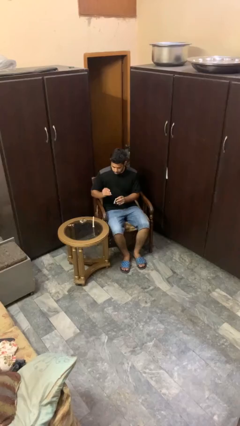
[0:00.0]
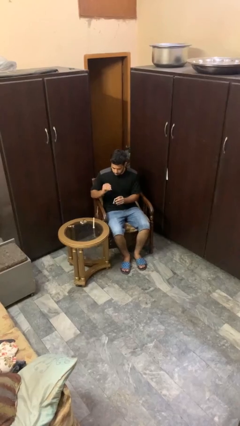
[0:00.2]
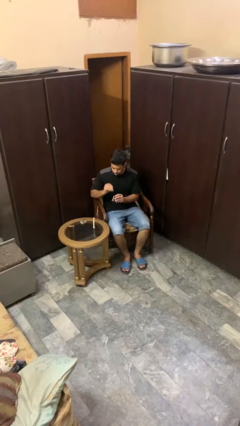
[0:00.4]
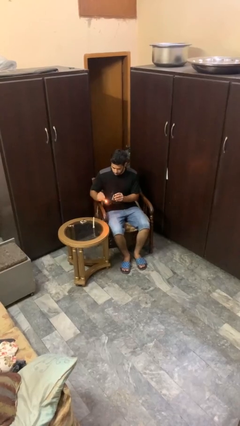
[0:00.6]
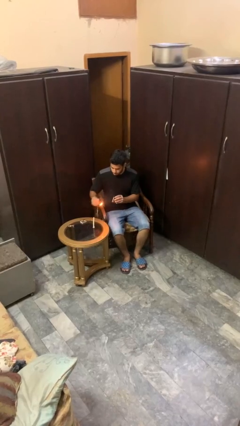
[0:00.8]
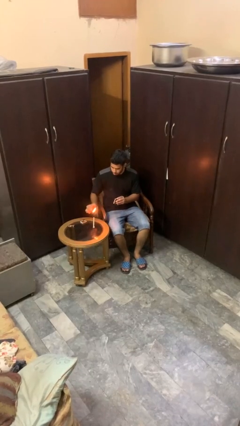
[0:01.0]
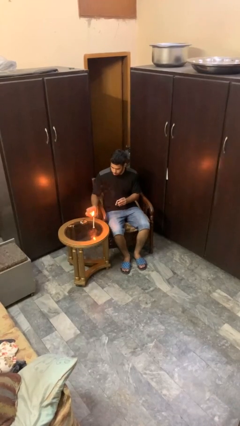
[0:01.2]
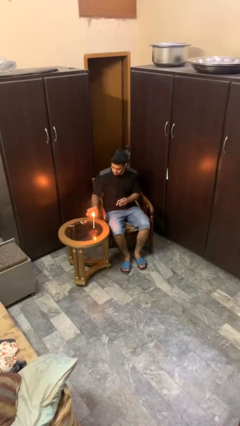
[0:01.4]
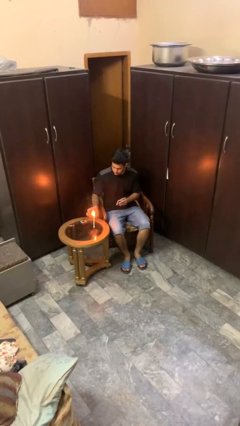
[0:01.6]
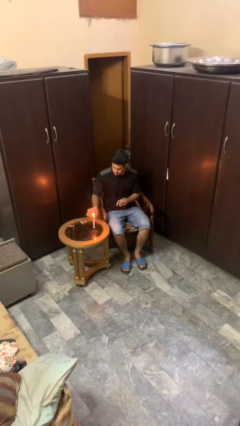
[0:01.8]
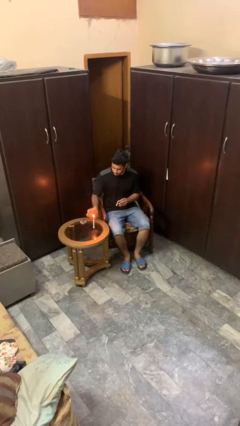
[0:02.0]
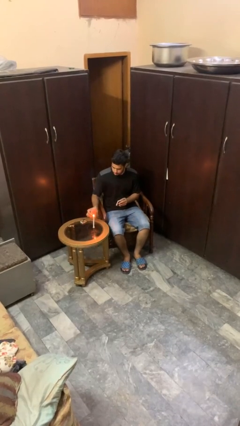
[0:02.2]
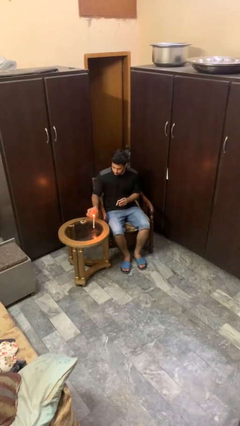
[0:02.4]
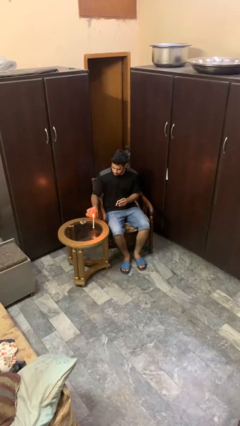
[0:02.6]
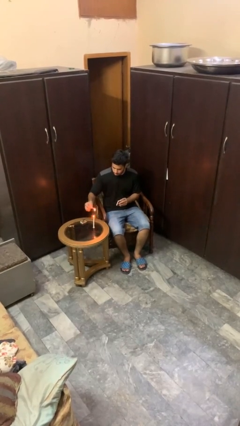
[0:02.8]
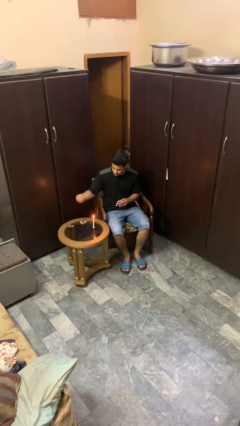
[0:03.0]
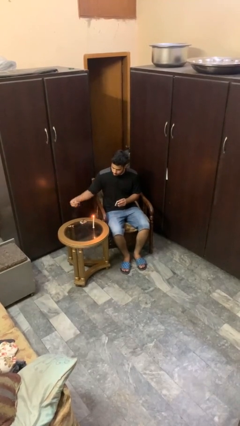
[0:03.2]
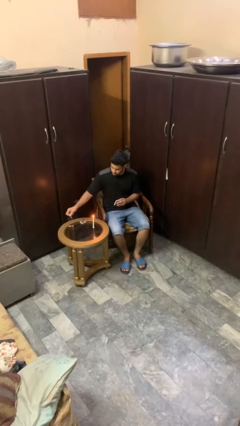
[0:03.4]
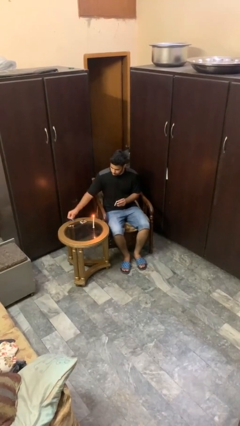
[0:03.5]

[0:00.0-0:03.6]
person lights candle

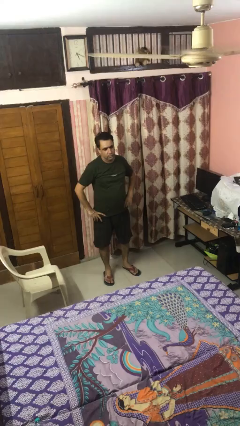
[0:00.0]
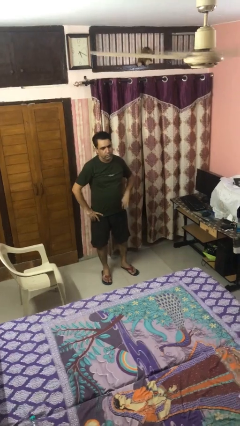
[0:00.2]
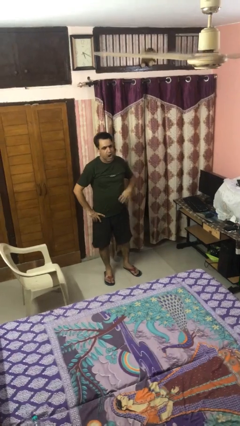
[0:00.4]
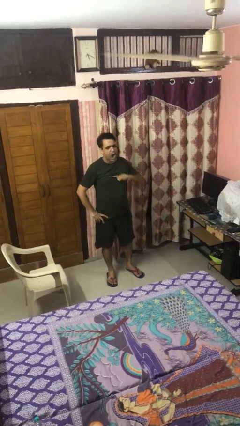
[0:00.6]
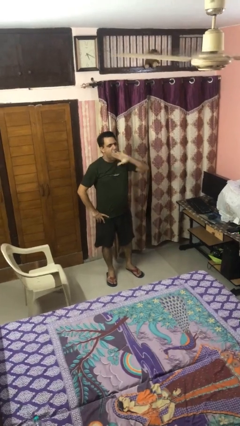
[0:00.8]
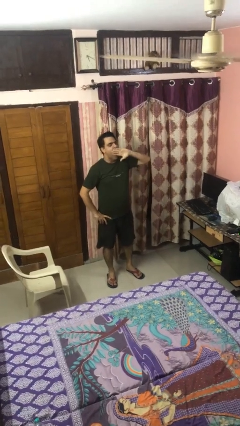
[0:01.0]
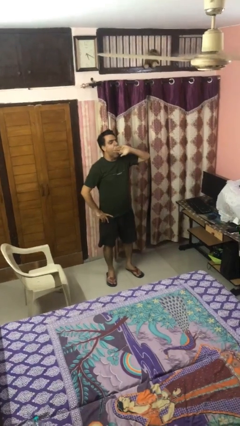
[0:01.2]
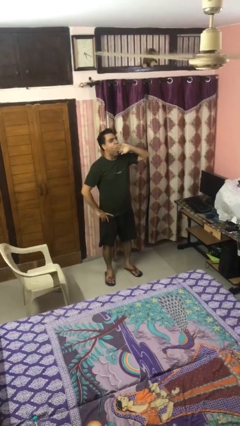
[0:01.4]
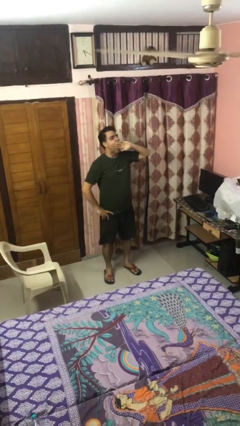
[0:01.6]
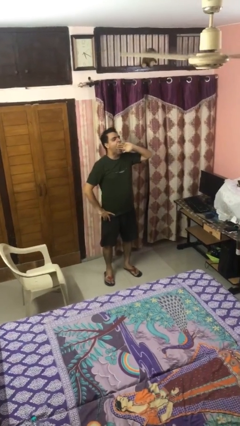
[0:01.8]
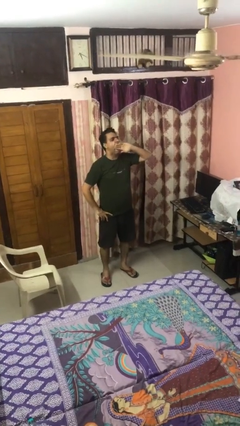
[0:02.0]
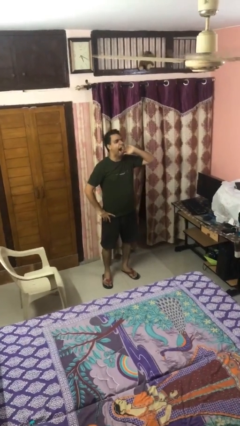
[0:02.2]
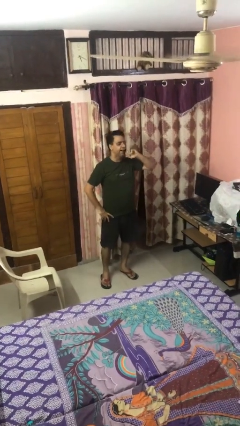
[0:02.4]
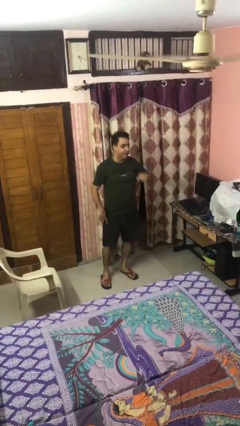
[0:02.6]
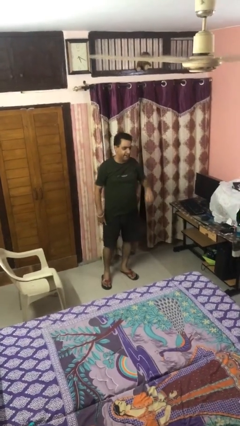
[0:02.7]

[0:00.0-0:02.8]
person yawns

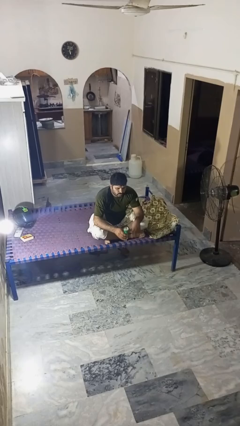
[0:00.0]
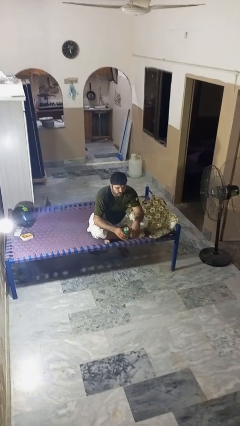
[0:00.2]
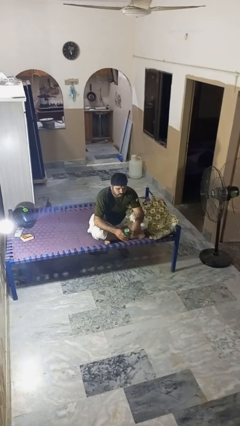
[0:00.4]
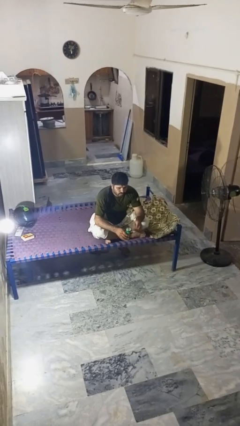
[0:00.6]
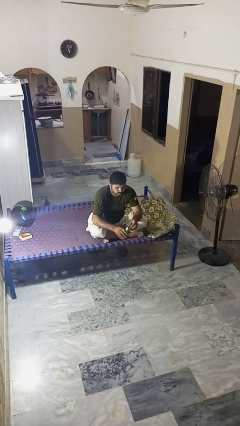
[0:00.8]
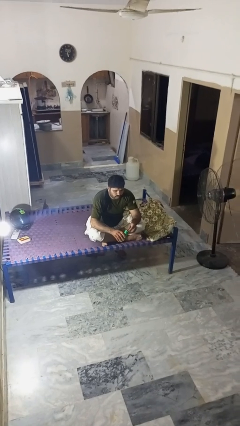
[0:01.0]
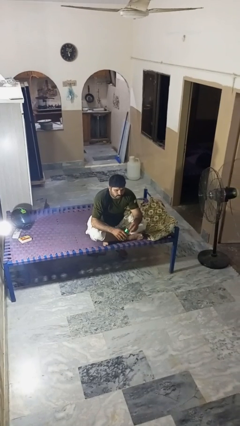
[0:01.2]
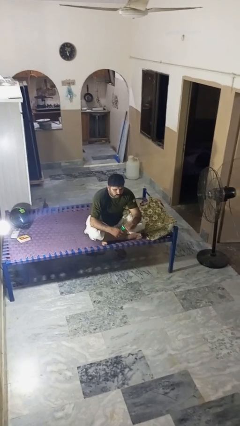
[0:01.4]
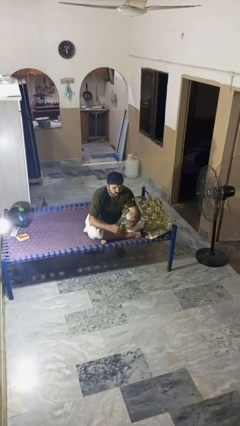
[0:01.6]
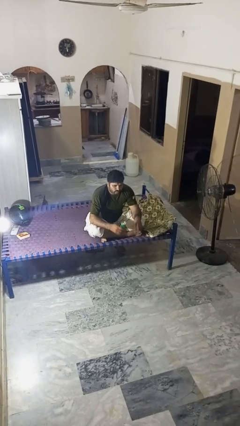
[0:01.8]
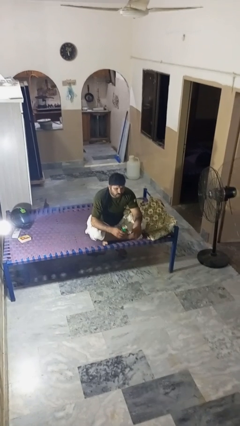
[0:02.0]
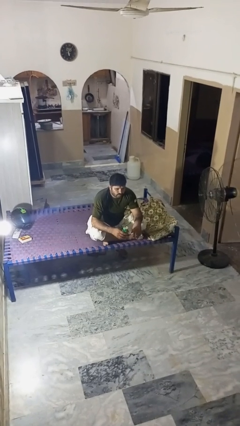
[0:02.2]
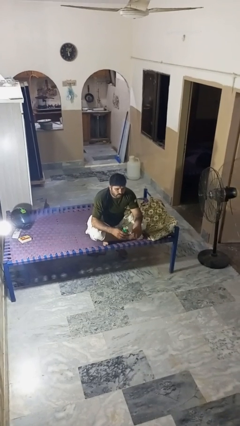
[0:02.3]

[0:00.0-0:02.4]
person opens beverage can

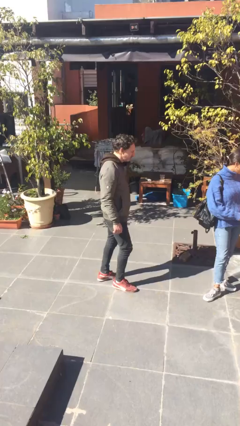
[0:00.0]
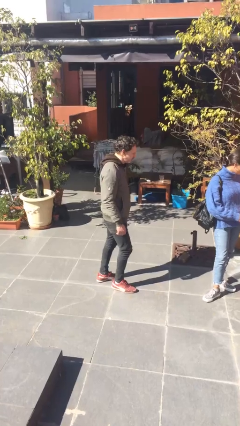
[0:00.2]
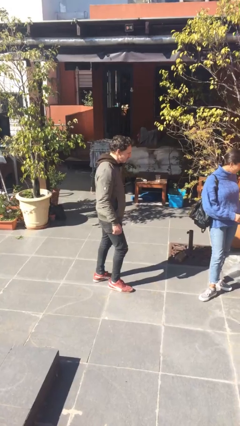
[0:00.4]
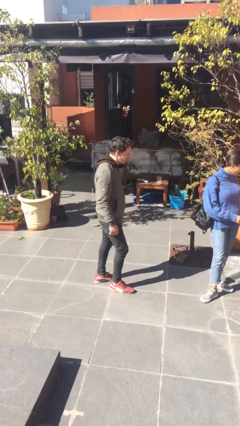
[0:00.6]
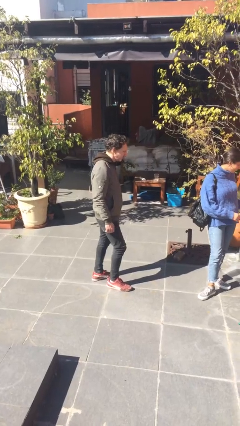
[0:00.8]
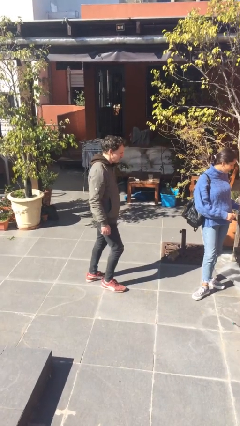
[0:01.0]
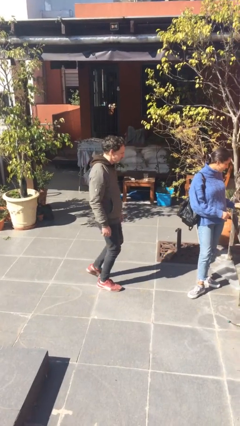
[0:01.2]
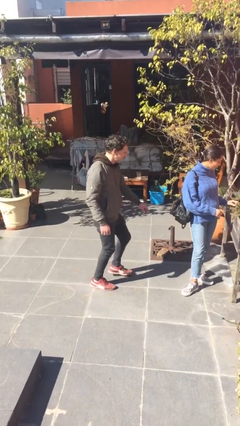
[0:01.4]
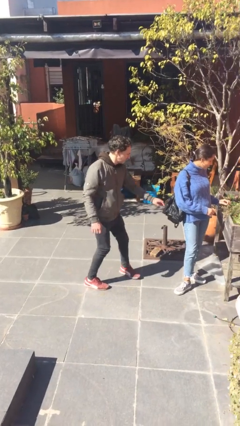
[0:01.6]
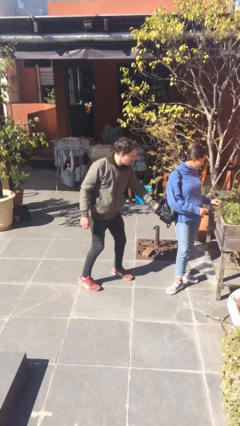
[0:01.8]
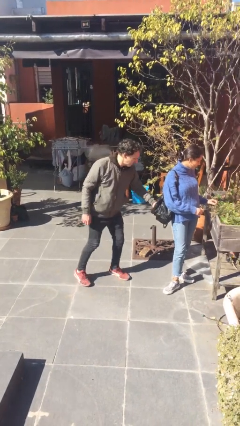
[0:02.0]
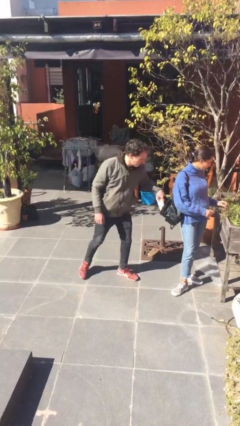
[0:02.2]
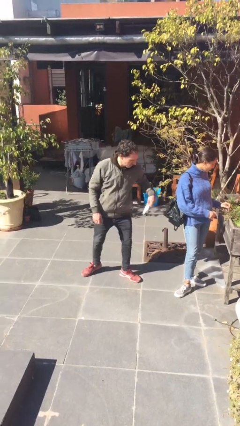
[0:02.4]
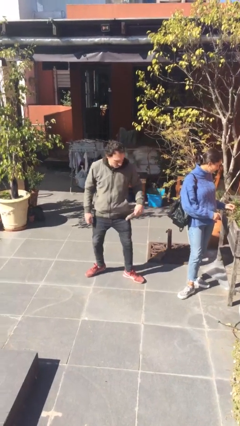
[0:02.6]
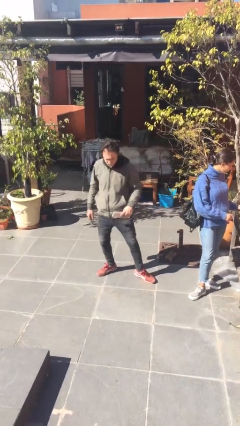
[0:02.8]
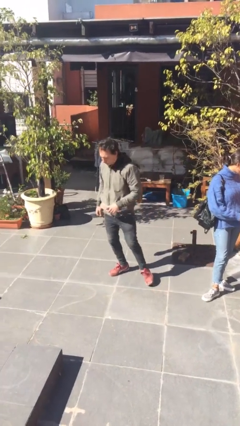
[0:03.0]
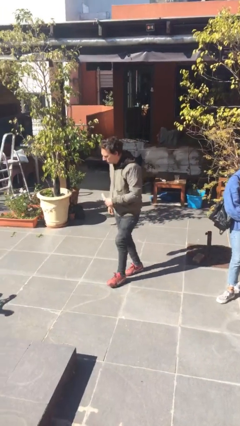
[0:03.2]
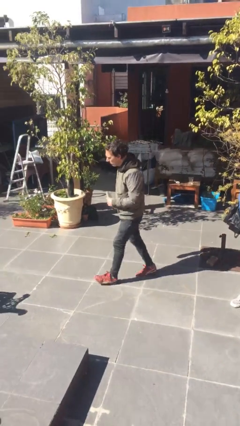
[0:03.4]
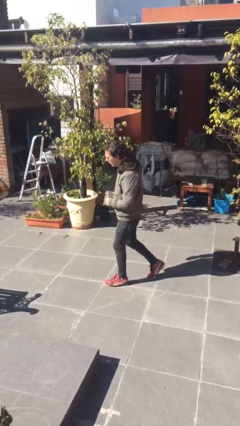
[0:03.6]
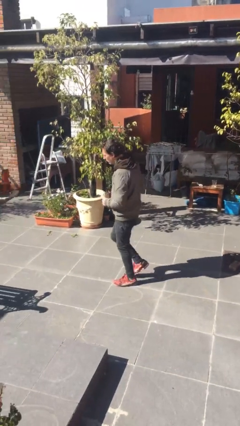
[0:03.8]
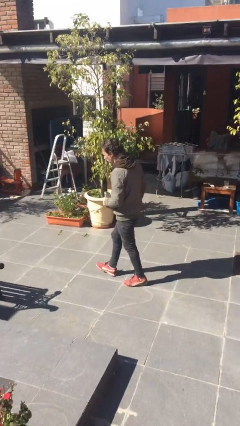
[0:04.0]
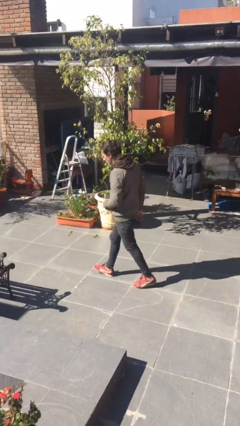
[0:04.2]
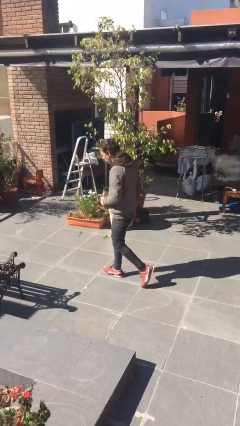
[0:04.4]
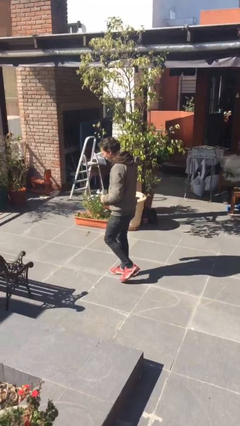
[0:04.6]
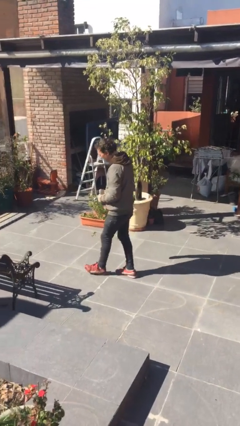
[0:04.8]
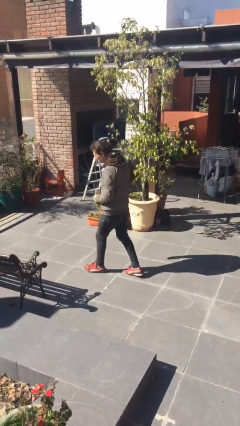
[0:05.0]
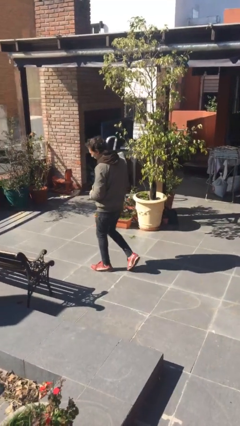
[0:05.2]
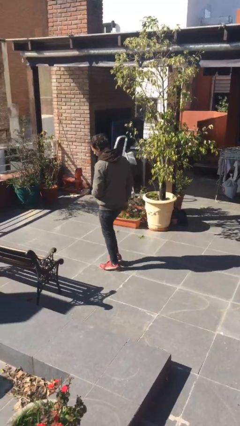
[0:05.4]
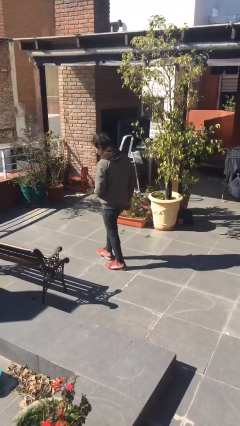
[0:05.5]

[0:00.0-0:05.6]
person steals object from person

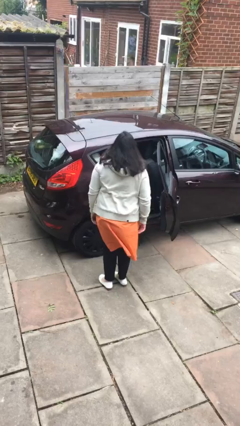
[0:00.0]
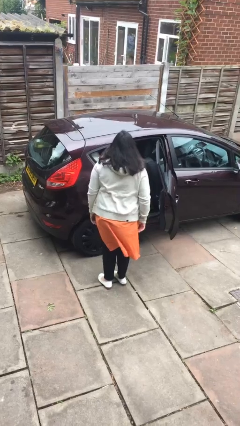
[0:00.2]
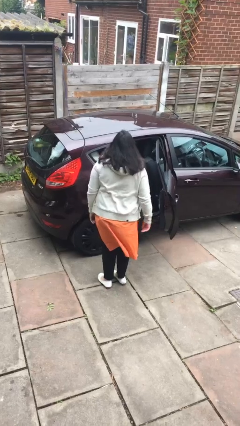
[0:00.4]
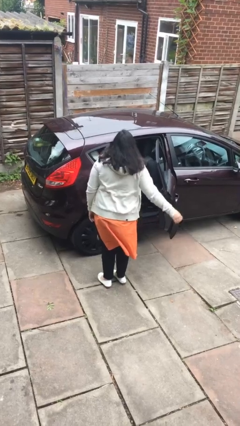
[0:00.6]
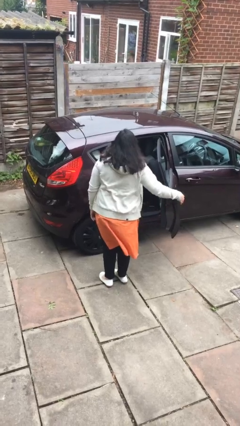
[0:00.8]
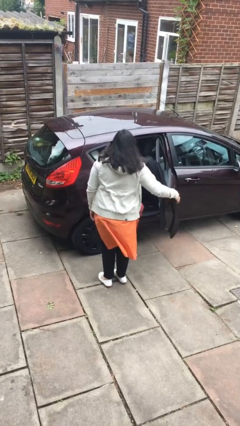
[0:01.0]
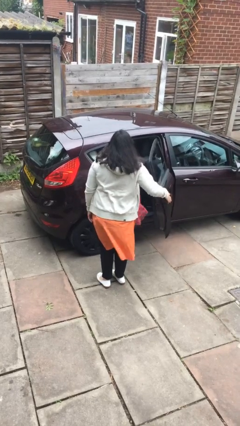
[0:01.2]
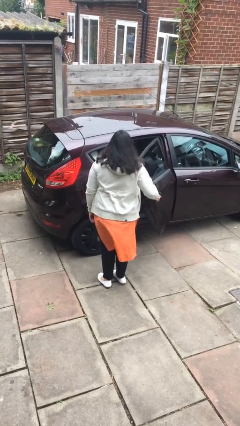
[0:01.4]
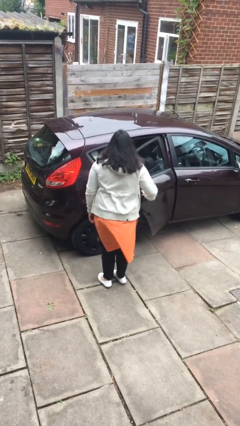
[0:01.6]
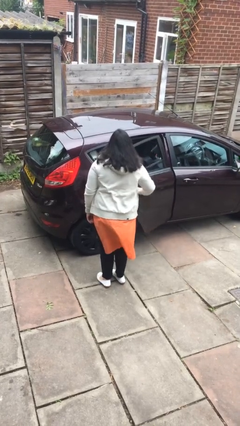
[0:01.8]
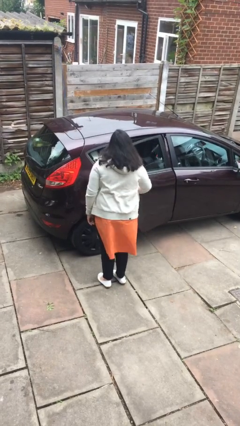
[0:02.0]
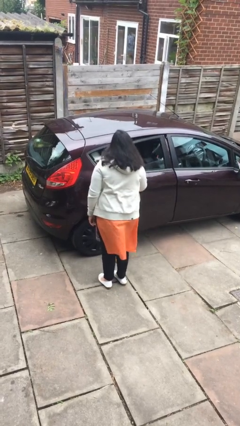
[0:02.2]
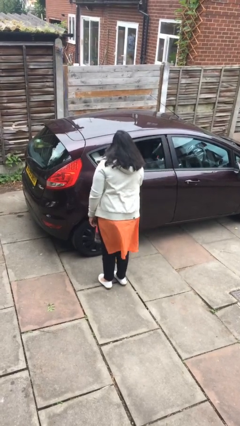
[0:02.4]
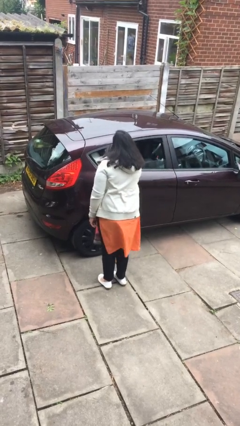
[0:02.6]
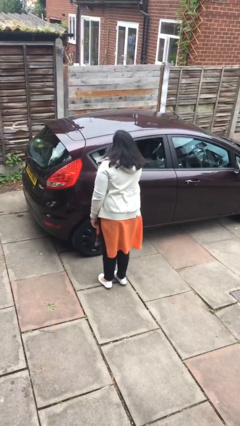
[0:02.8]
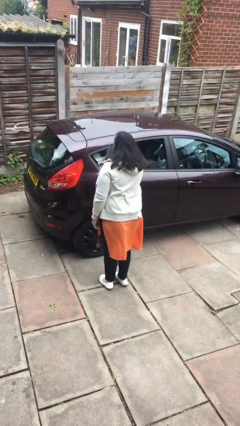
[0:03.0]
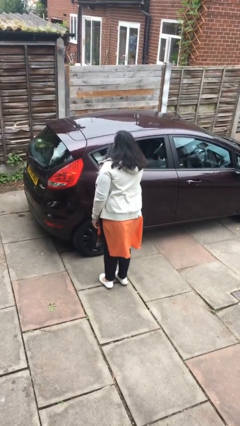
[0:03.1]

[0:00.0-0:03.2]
person closes car door
